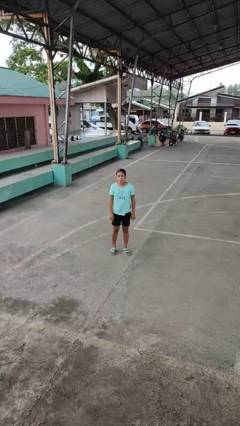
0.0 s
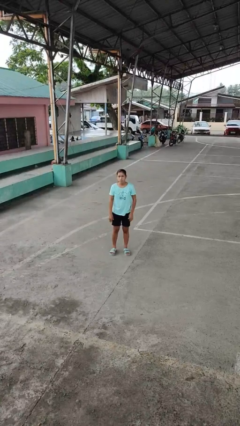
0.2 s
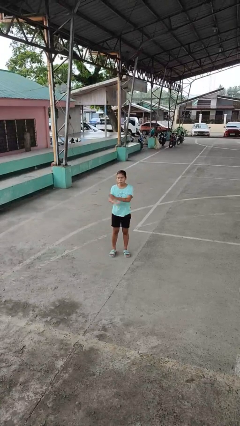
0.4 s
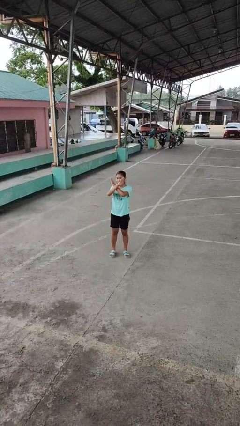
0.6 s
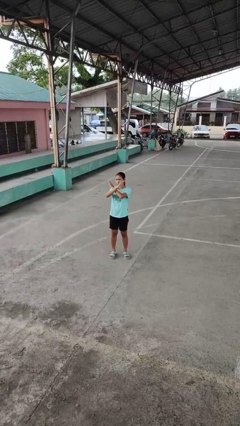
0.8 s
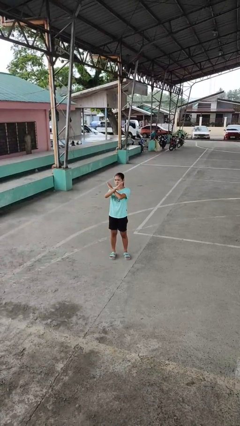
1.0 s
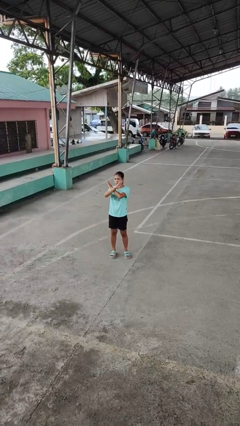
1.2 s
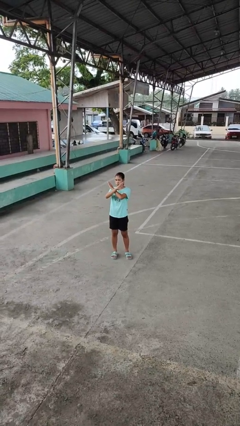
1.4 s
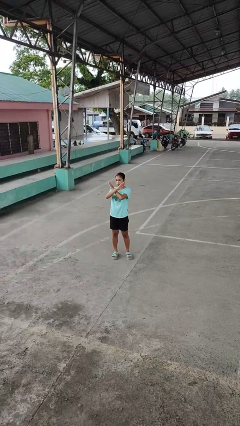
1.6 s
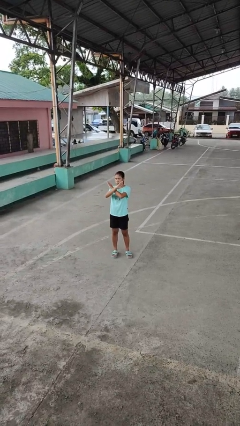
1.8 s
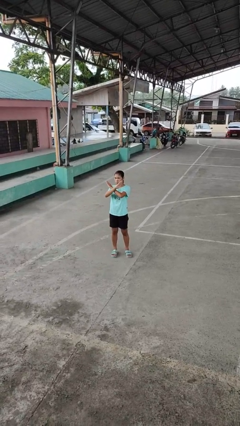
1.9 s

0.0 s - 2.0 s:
person gestures arms x

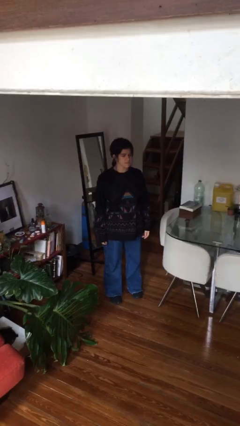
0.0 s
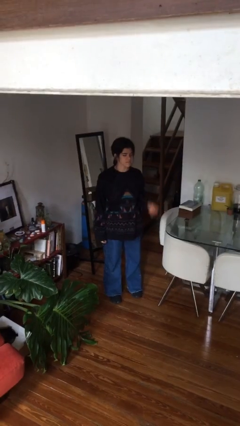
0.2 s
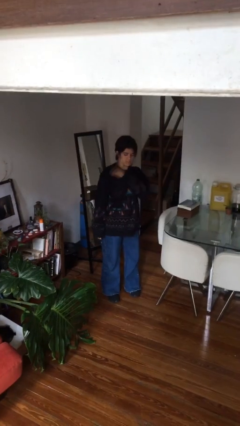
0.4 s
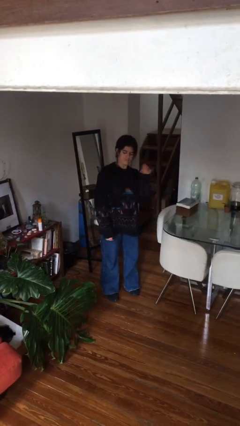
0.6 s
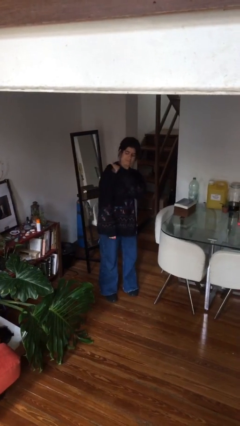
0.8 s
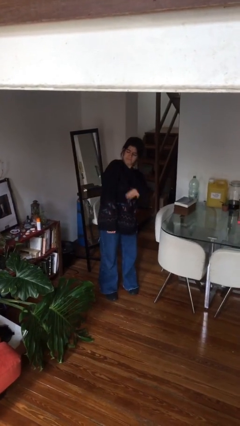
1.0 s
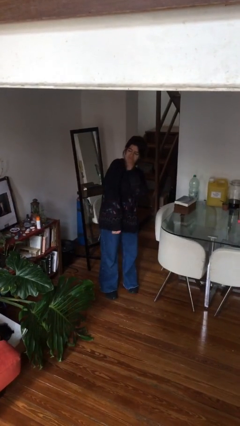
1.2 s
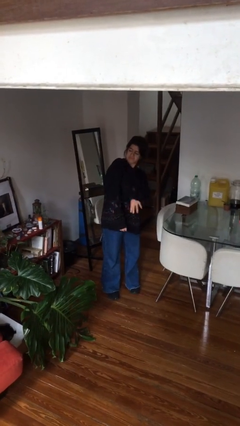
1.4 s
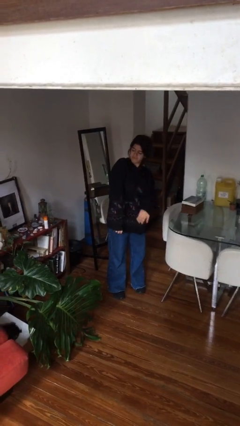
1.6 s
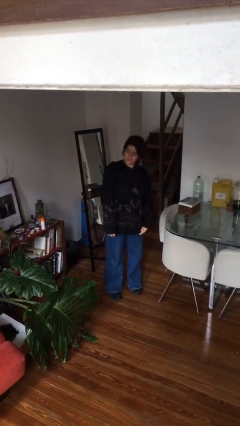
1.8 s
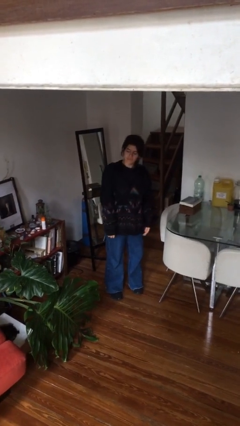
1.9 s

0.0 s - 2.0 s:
person swats bug

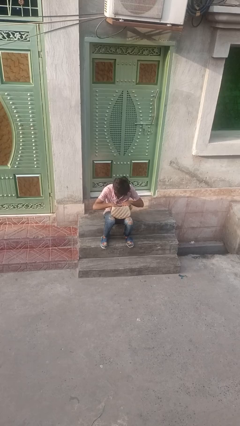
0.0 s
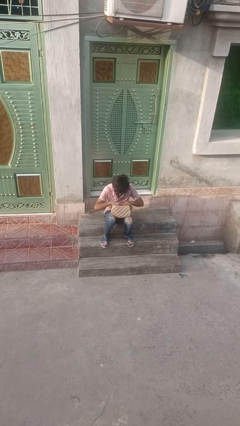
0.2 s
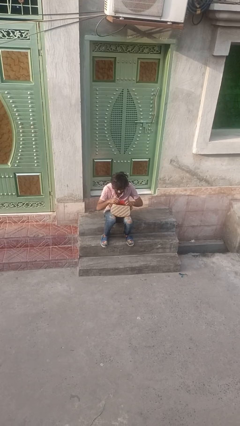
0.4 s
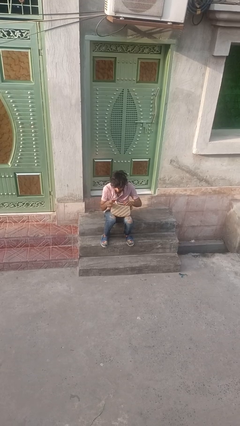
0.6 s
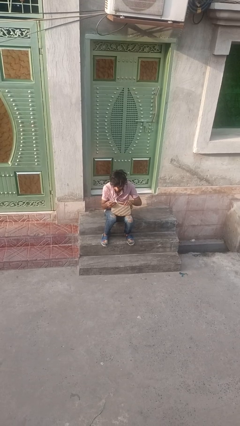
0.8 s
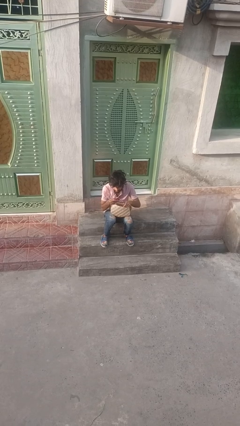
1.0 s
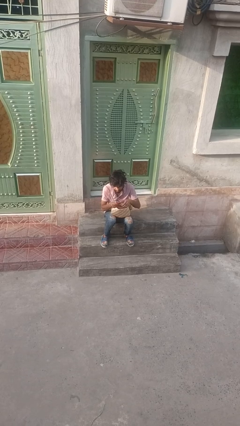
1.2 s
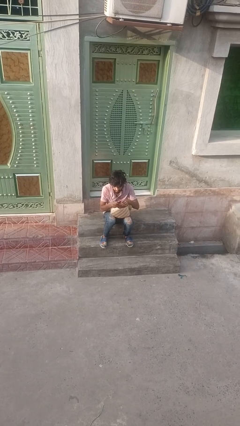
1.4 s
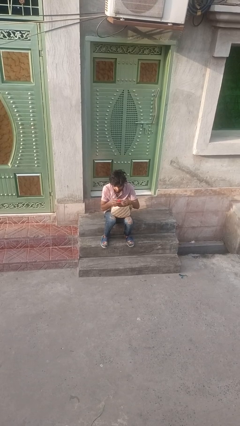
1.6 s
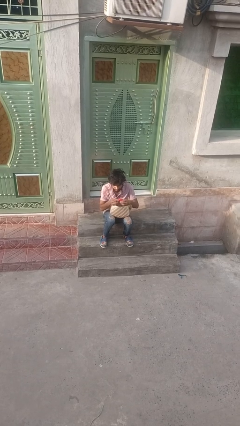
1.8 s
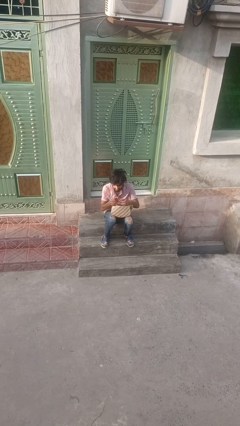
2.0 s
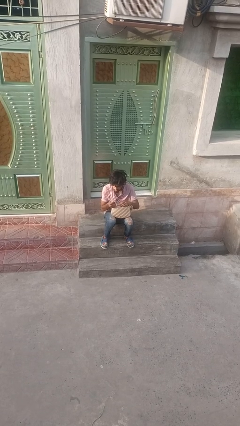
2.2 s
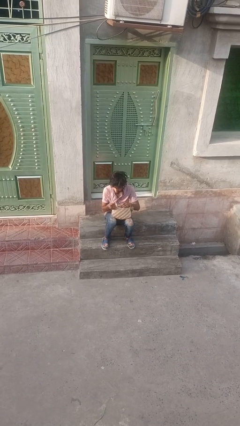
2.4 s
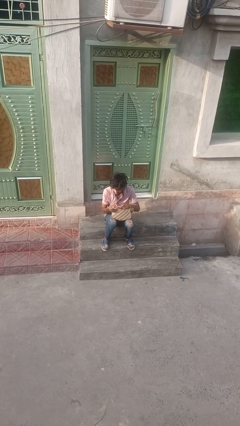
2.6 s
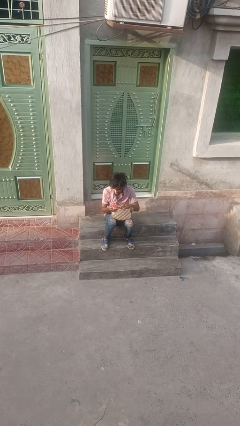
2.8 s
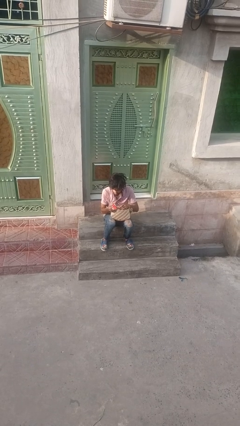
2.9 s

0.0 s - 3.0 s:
person takes object from backpack

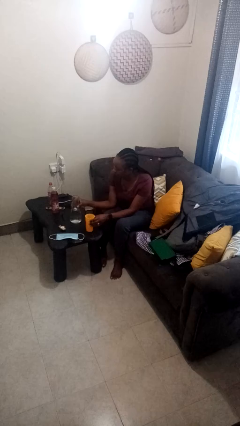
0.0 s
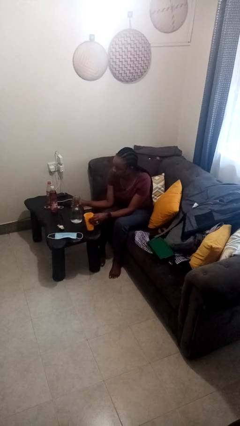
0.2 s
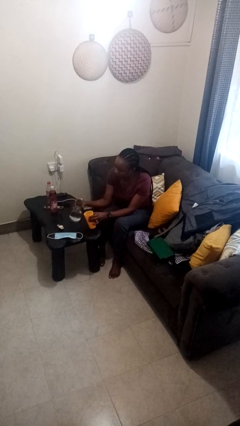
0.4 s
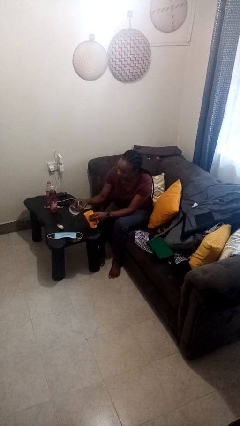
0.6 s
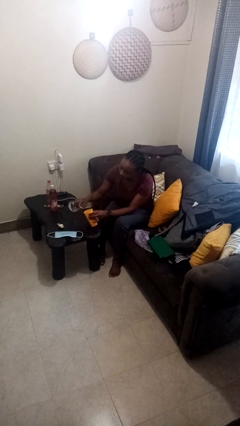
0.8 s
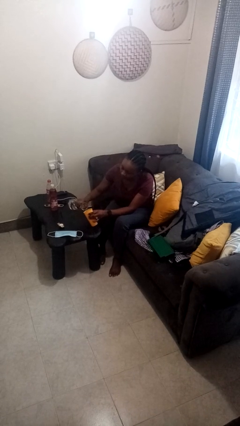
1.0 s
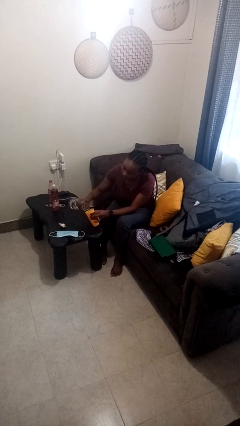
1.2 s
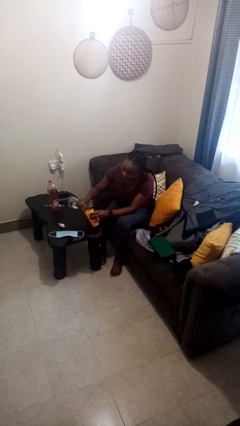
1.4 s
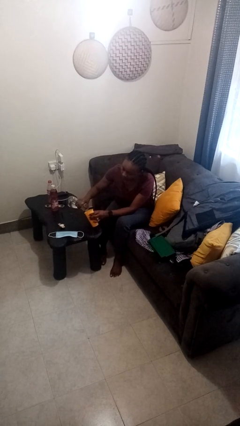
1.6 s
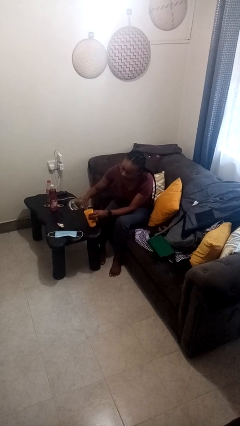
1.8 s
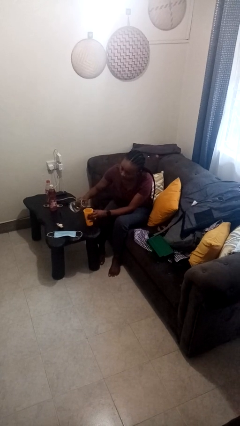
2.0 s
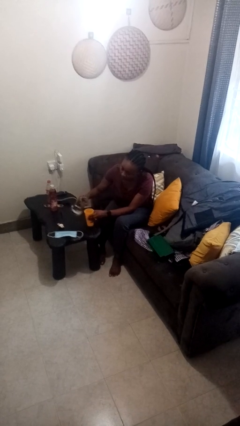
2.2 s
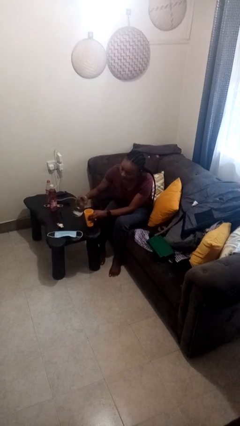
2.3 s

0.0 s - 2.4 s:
person pours liquid into cup

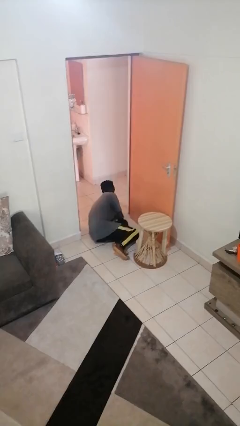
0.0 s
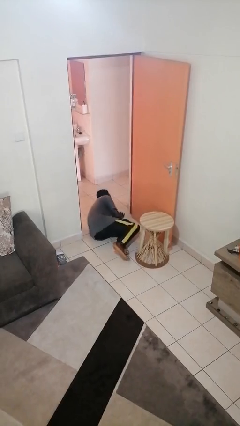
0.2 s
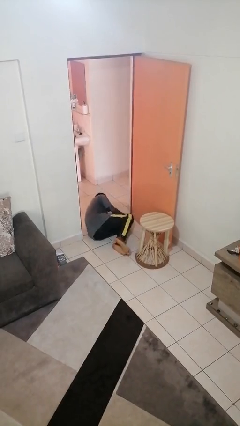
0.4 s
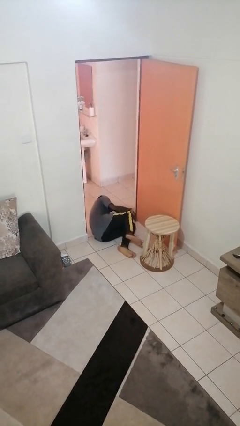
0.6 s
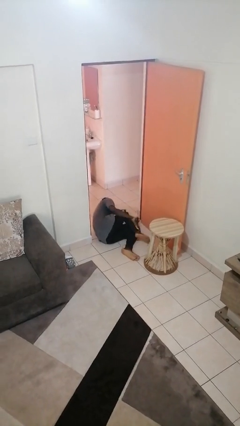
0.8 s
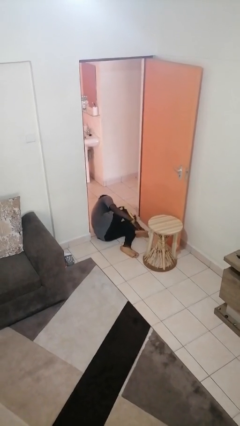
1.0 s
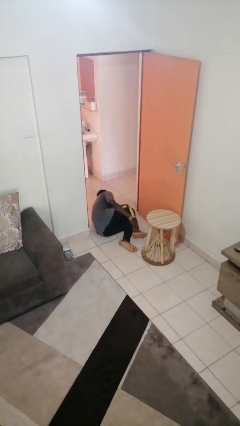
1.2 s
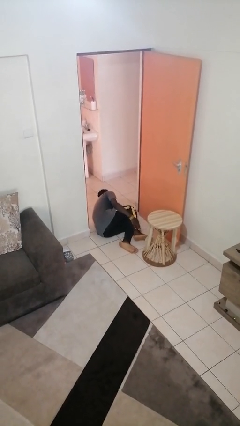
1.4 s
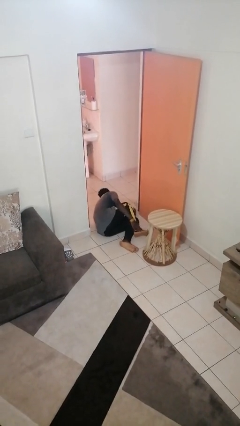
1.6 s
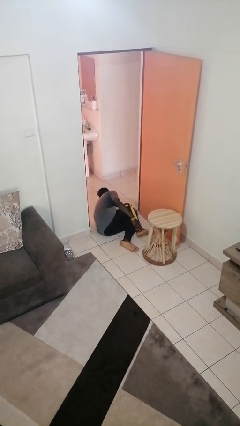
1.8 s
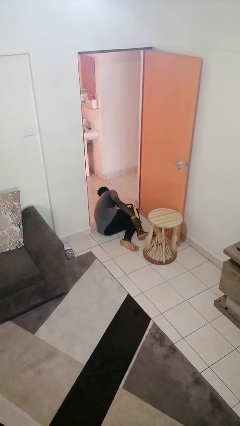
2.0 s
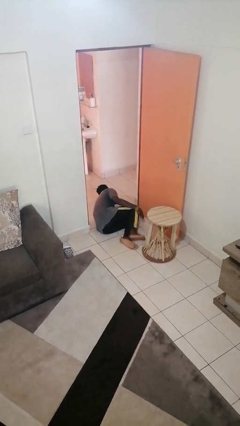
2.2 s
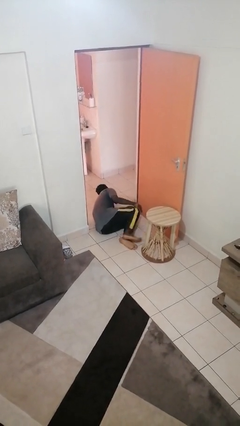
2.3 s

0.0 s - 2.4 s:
person lies down on floor

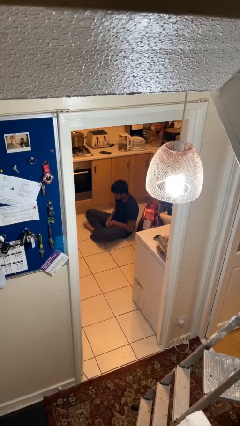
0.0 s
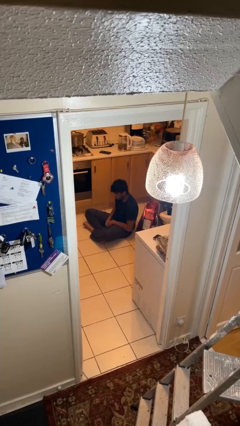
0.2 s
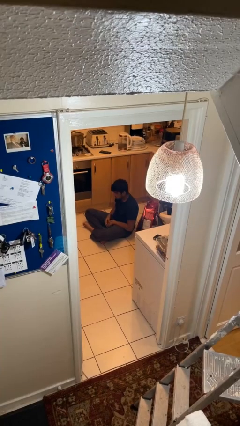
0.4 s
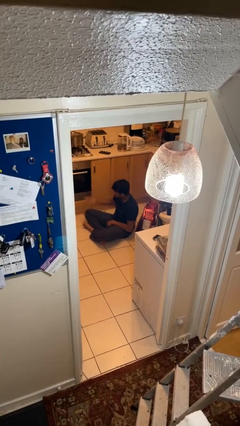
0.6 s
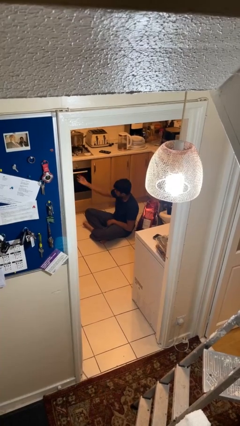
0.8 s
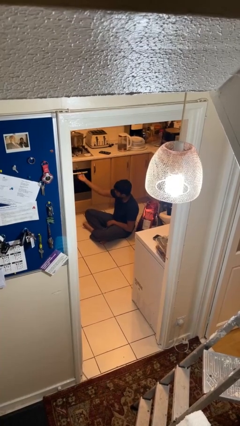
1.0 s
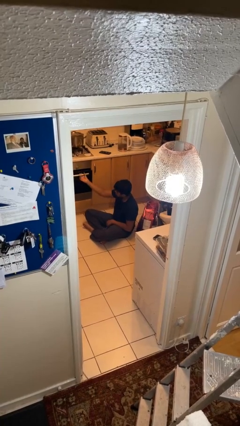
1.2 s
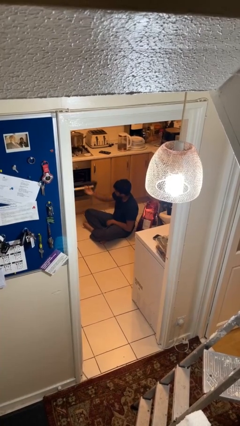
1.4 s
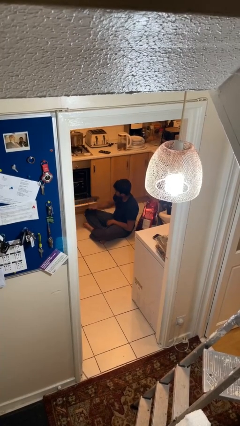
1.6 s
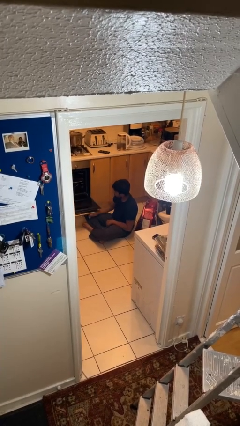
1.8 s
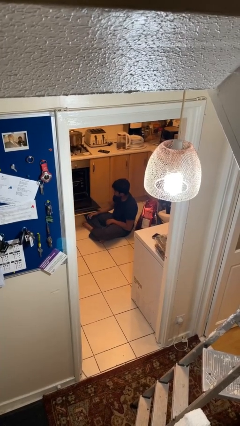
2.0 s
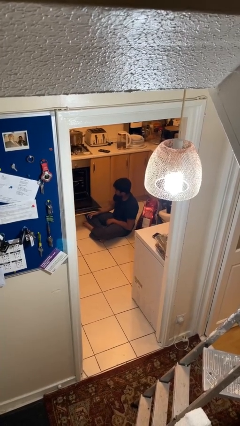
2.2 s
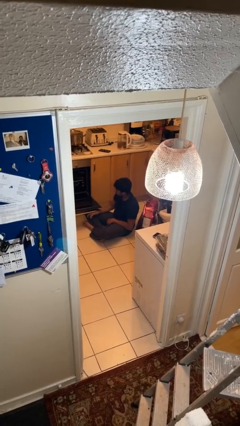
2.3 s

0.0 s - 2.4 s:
person opens oven door

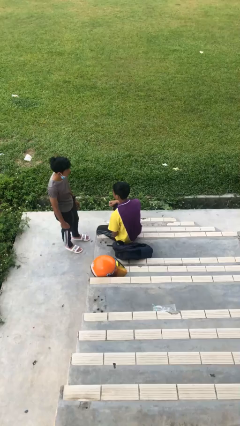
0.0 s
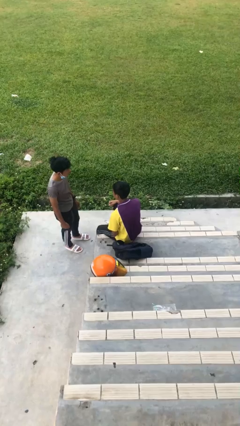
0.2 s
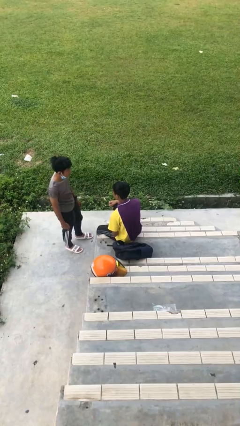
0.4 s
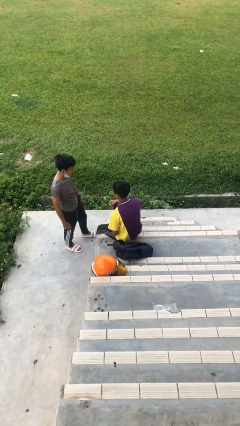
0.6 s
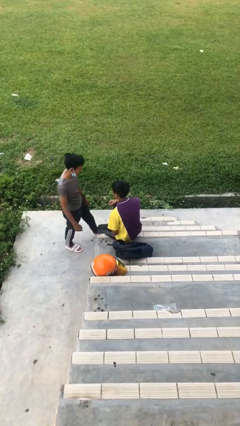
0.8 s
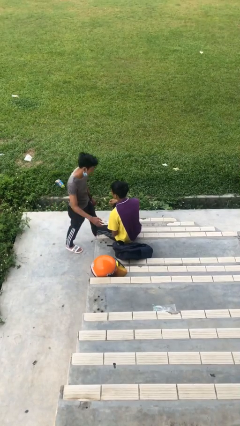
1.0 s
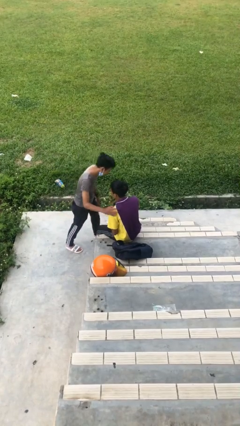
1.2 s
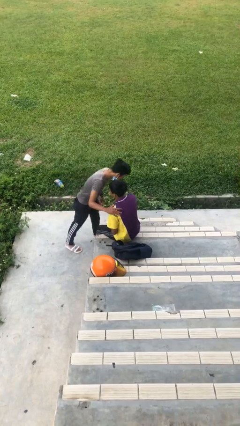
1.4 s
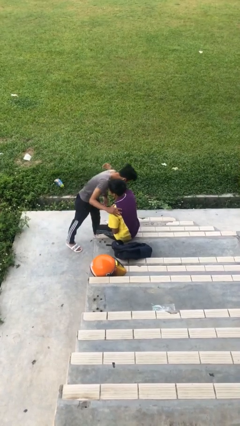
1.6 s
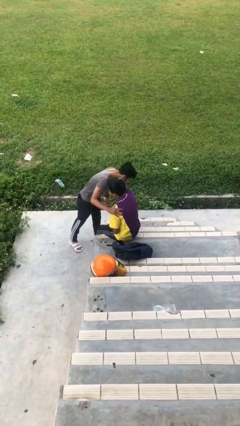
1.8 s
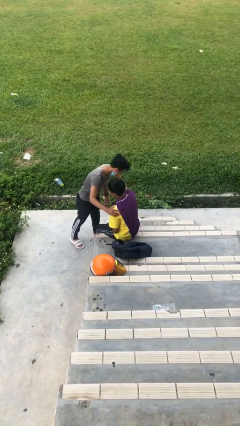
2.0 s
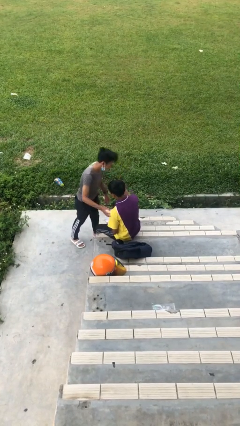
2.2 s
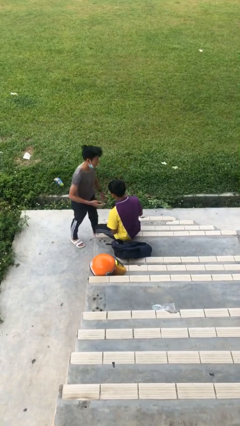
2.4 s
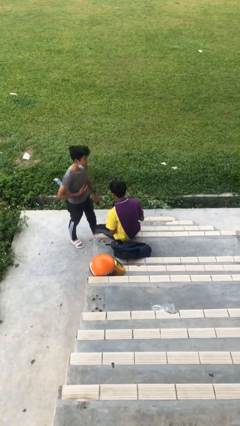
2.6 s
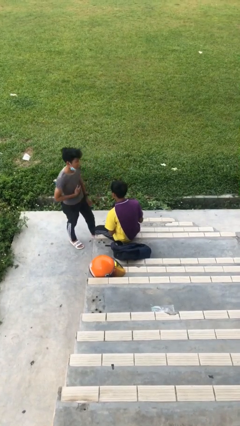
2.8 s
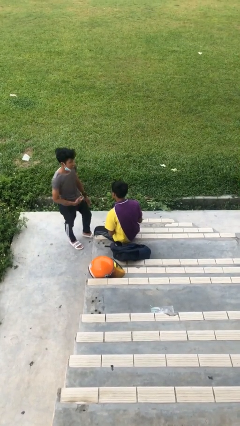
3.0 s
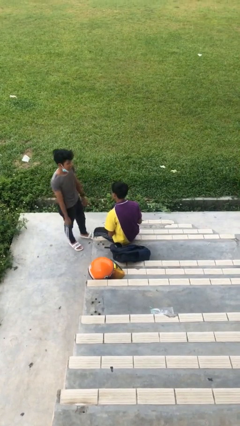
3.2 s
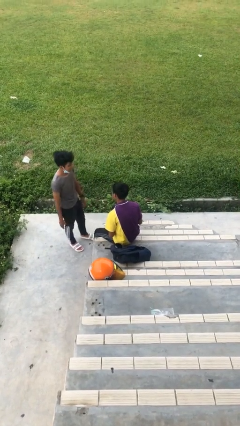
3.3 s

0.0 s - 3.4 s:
person embraces person
